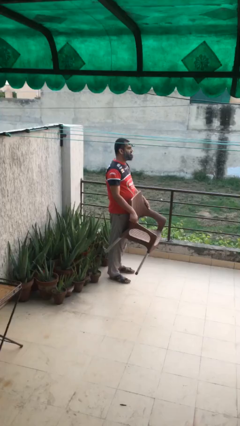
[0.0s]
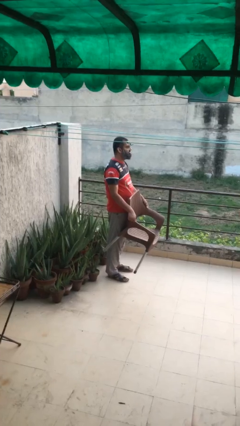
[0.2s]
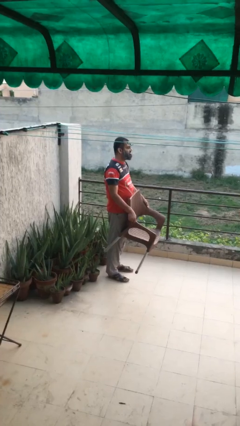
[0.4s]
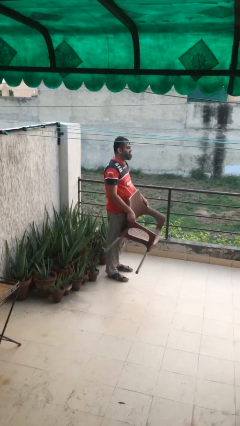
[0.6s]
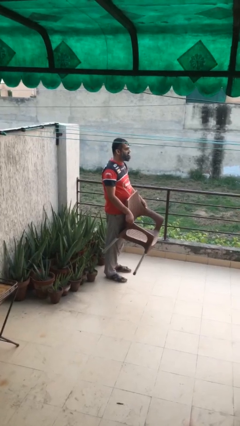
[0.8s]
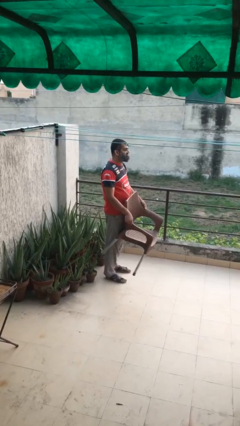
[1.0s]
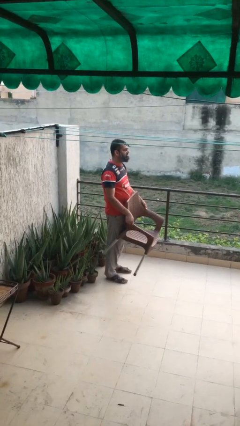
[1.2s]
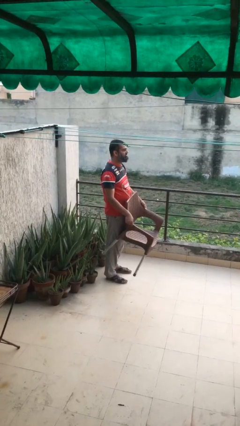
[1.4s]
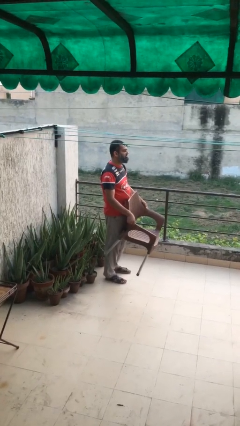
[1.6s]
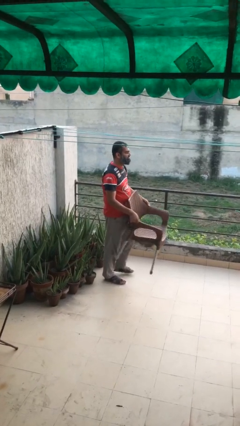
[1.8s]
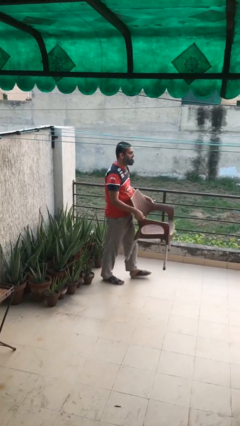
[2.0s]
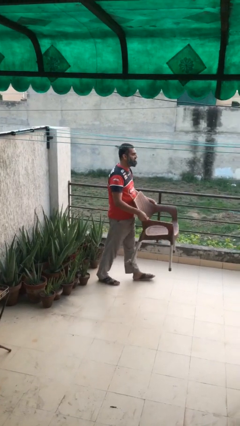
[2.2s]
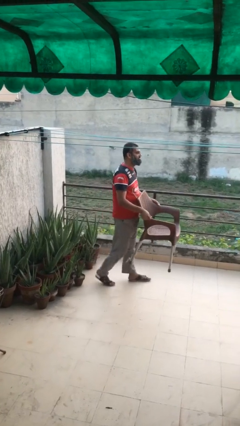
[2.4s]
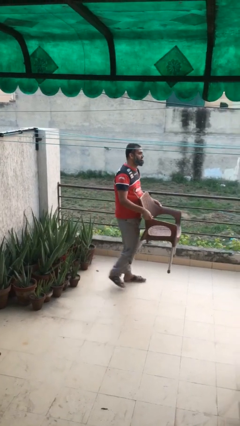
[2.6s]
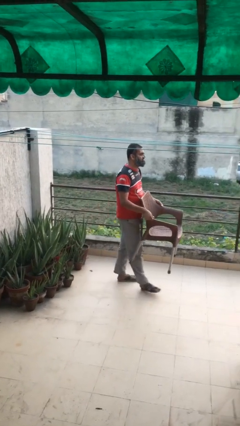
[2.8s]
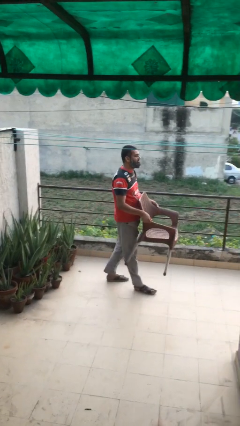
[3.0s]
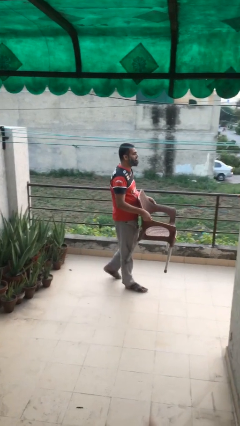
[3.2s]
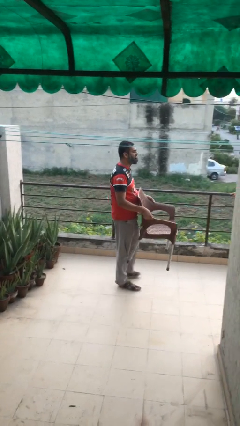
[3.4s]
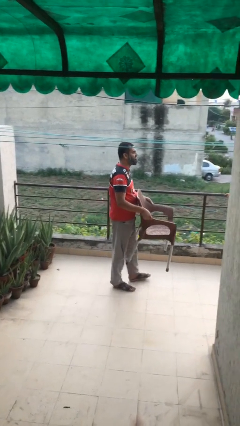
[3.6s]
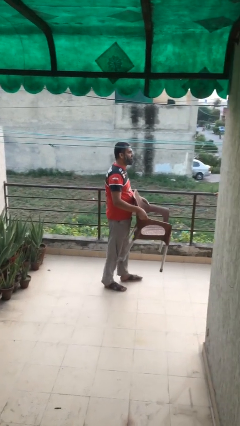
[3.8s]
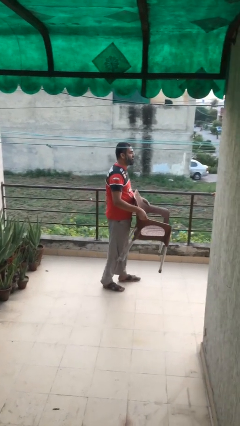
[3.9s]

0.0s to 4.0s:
person carries heavy object

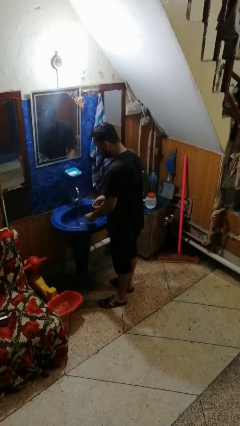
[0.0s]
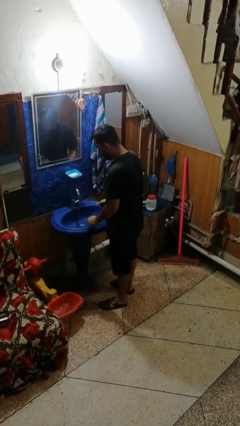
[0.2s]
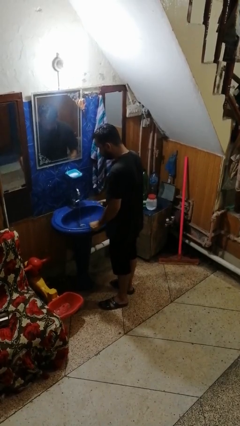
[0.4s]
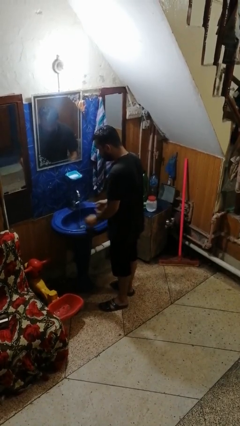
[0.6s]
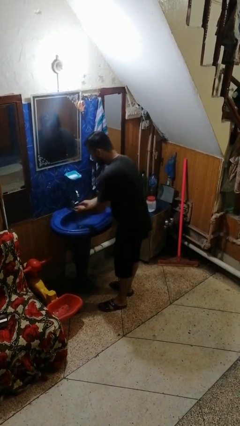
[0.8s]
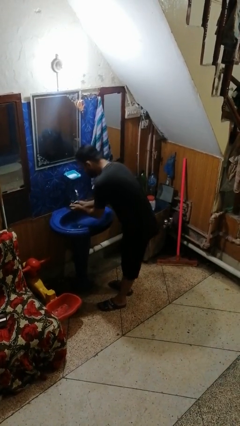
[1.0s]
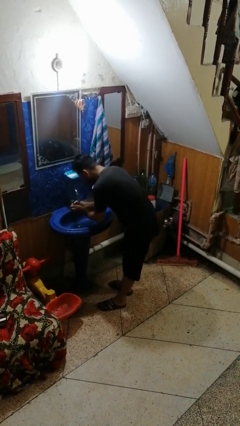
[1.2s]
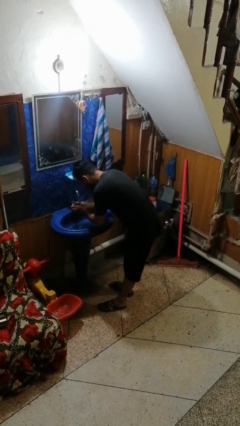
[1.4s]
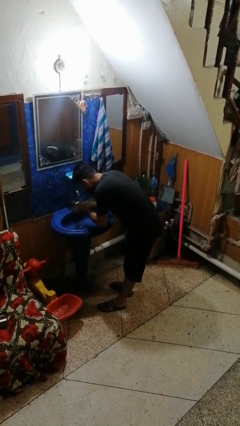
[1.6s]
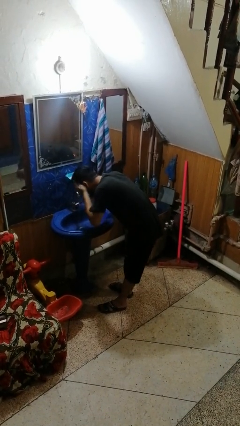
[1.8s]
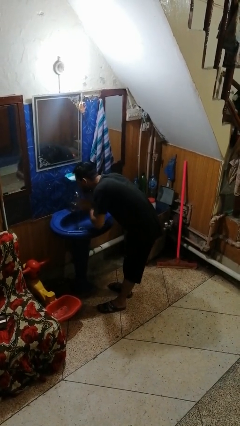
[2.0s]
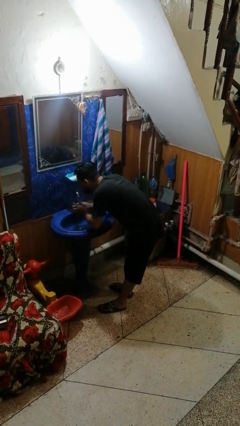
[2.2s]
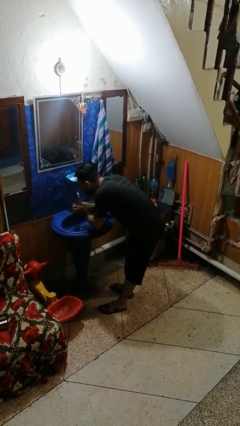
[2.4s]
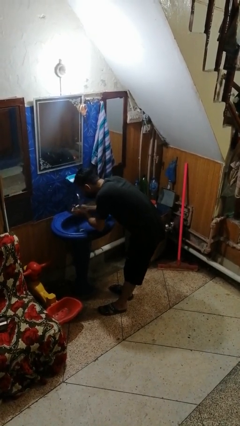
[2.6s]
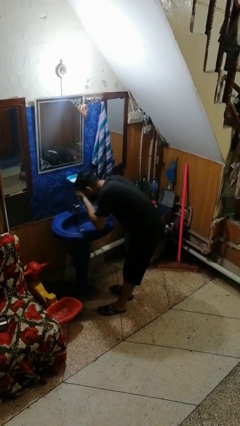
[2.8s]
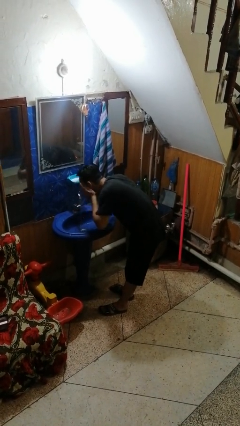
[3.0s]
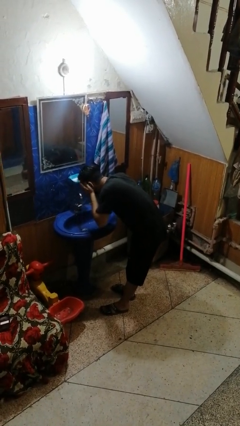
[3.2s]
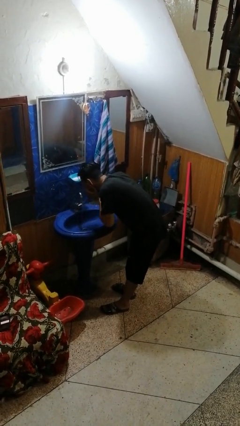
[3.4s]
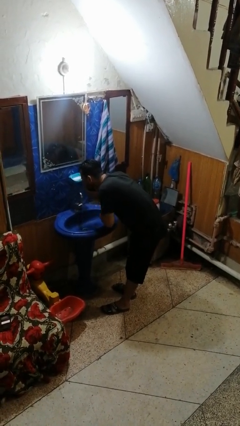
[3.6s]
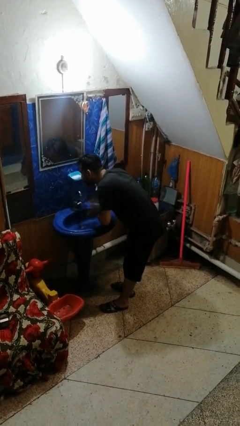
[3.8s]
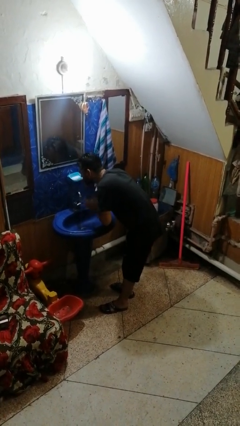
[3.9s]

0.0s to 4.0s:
person washes face

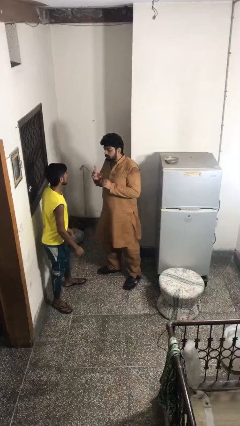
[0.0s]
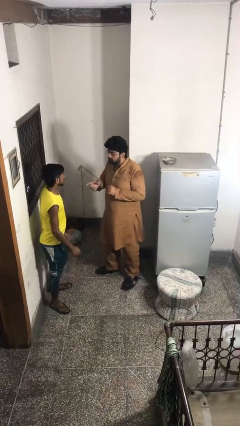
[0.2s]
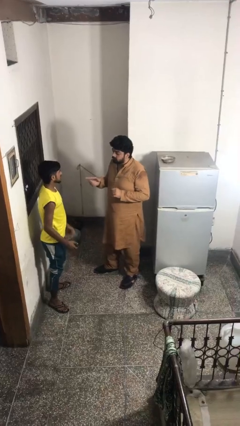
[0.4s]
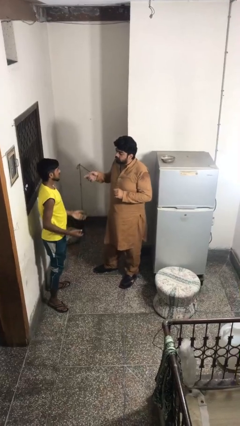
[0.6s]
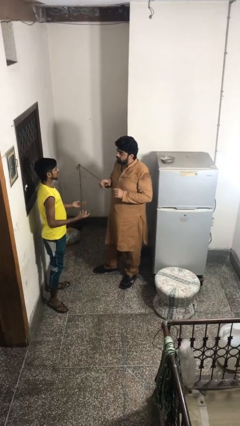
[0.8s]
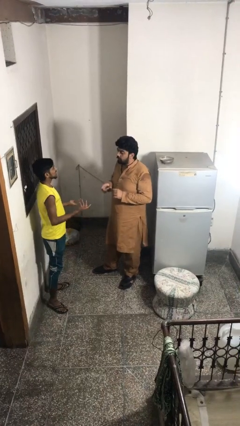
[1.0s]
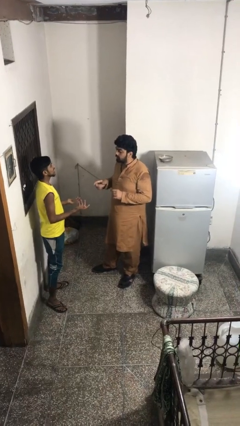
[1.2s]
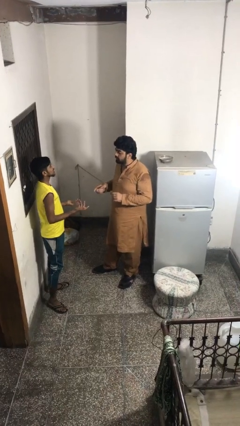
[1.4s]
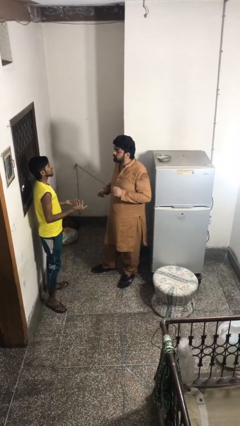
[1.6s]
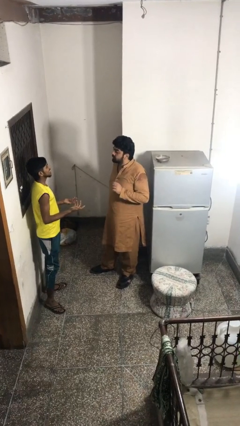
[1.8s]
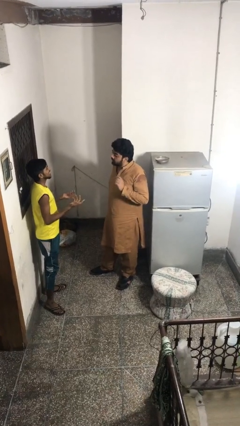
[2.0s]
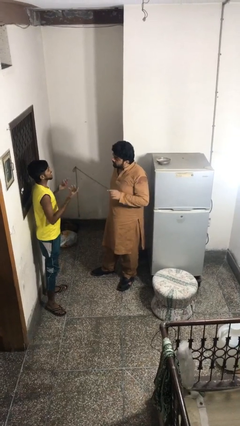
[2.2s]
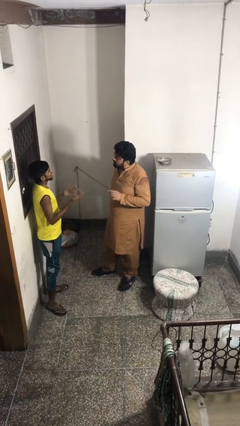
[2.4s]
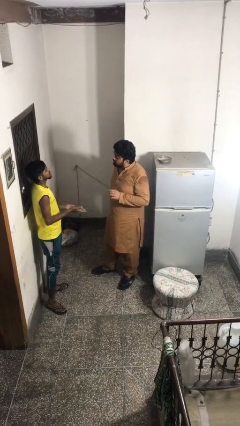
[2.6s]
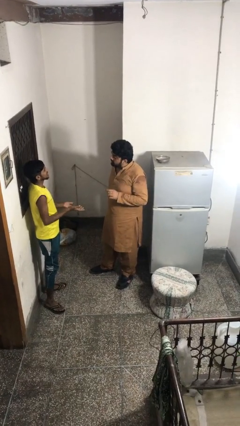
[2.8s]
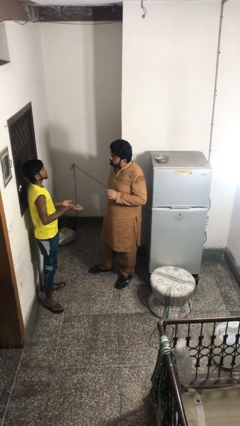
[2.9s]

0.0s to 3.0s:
person talks to person

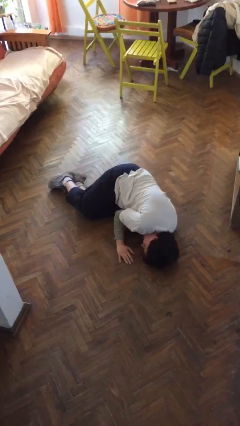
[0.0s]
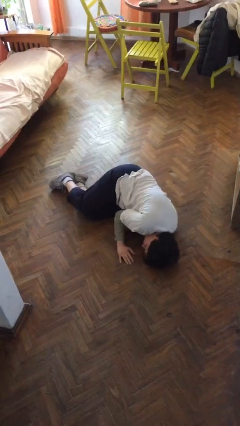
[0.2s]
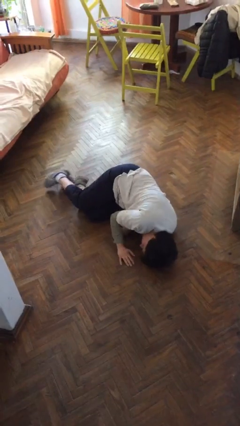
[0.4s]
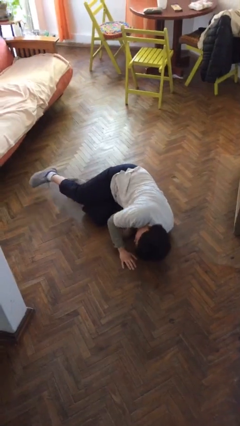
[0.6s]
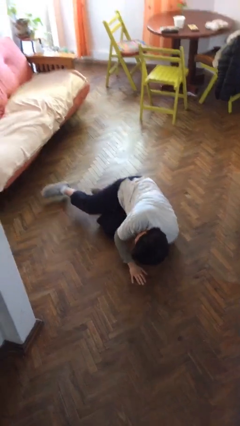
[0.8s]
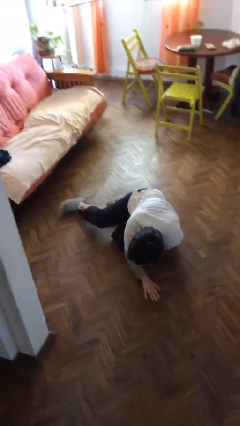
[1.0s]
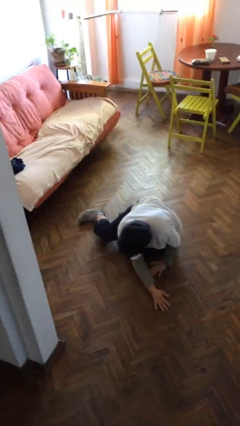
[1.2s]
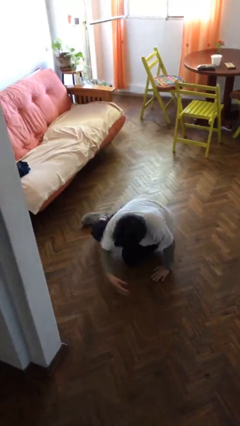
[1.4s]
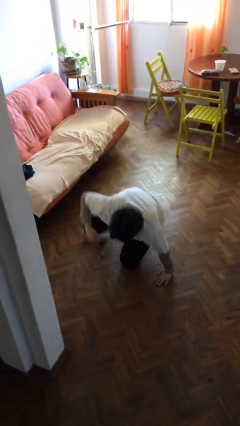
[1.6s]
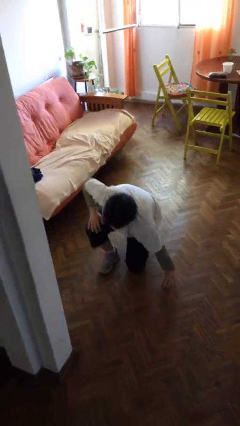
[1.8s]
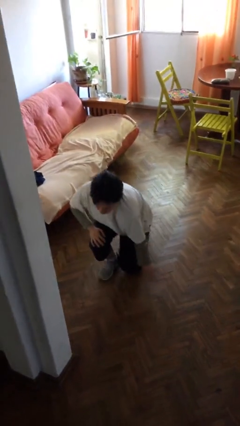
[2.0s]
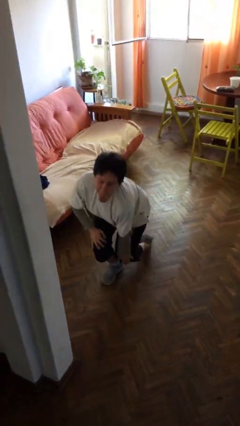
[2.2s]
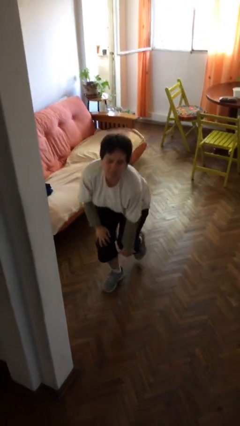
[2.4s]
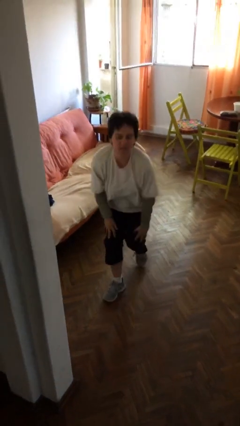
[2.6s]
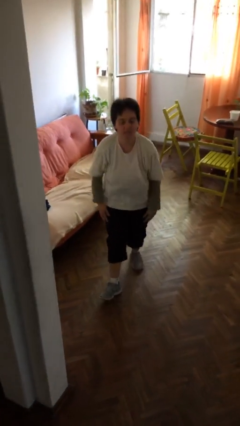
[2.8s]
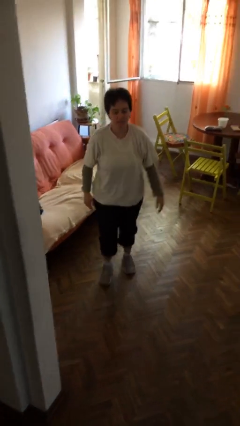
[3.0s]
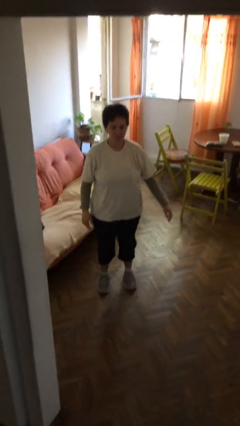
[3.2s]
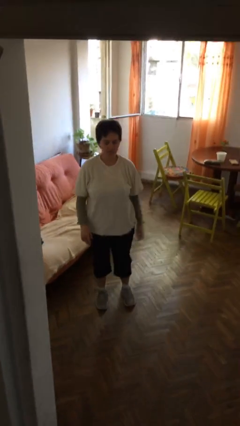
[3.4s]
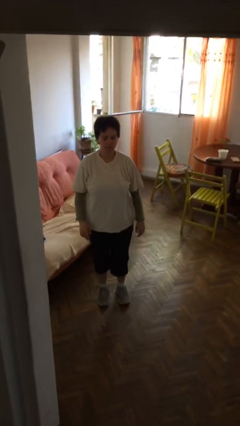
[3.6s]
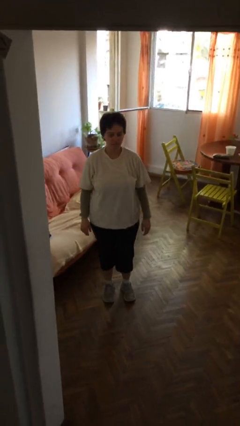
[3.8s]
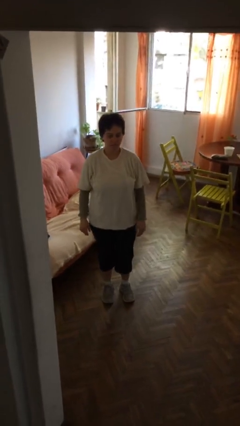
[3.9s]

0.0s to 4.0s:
person stands up from floor

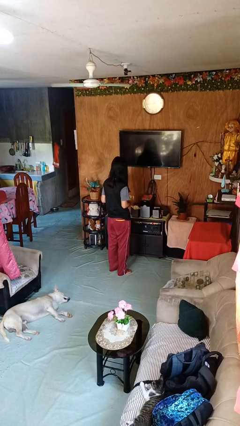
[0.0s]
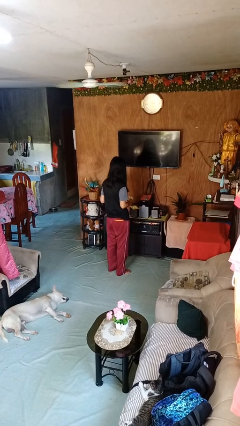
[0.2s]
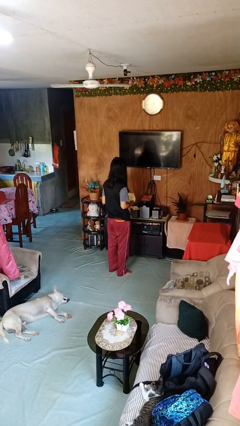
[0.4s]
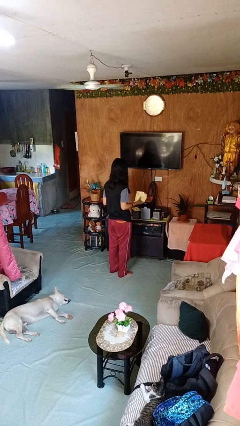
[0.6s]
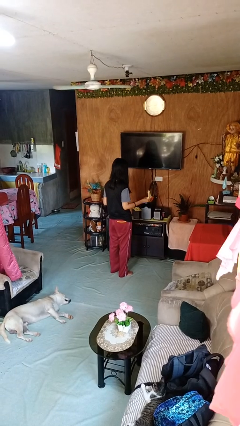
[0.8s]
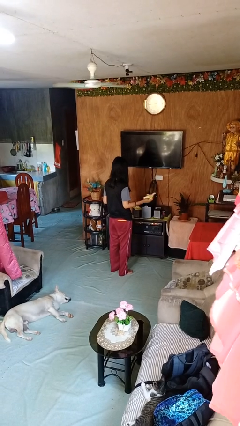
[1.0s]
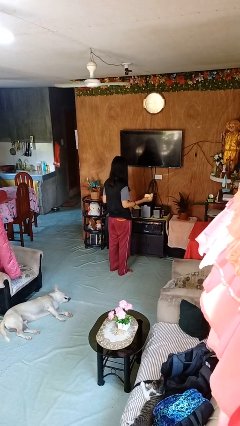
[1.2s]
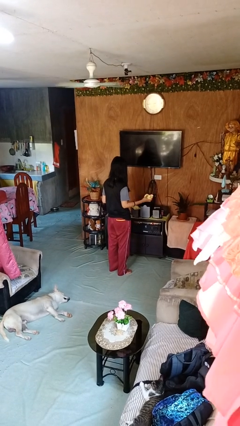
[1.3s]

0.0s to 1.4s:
person crumples paper

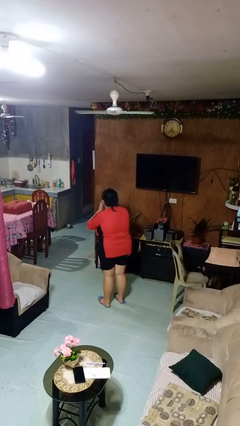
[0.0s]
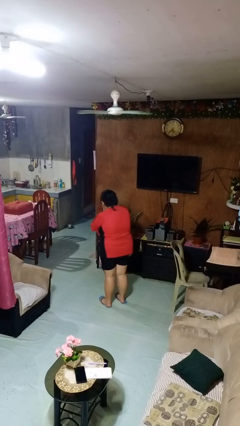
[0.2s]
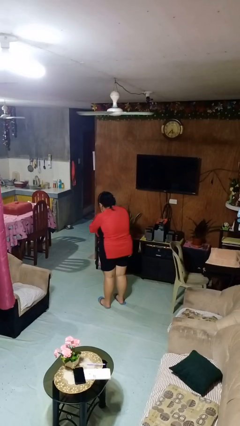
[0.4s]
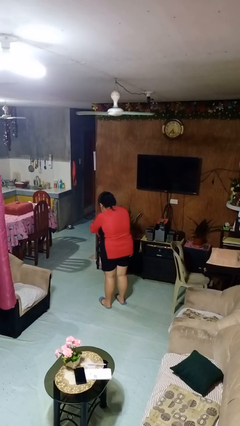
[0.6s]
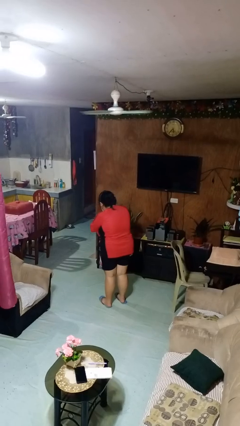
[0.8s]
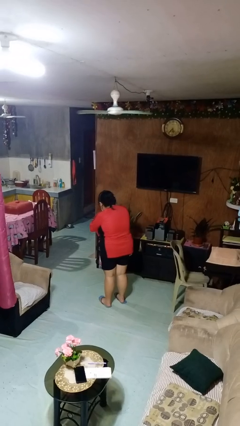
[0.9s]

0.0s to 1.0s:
person sneezes into hand

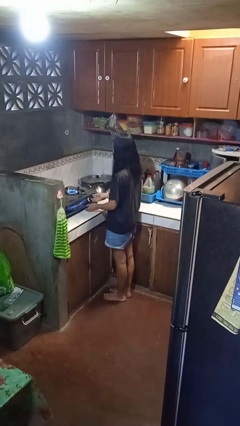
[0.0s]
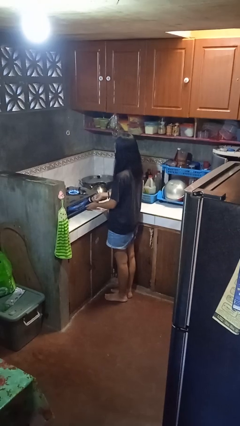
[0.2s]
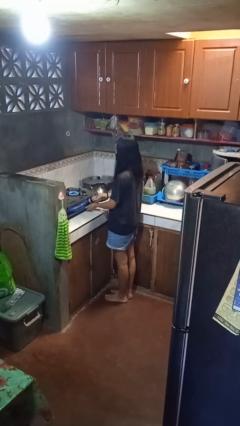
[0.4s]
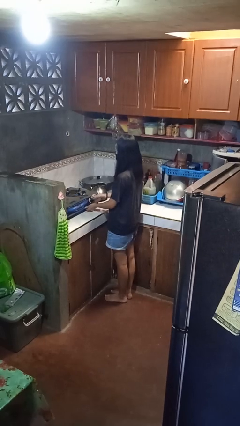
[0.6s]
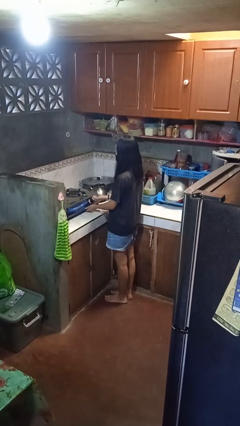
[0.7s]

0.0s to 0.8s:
person turns off stovetop
